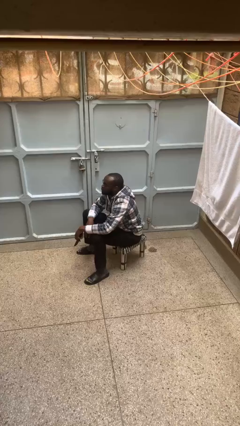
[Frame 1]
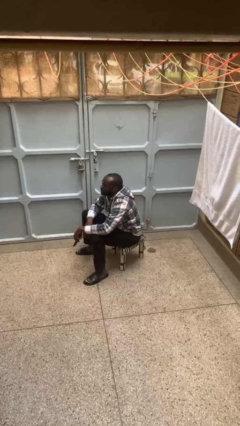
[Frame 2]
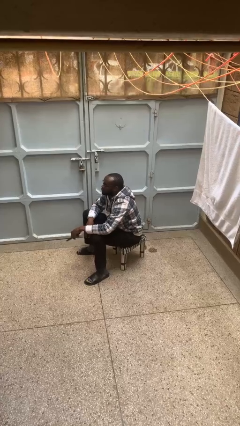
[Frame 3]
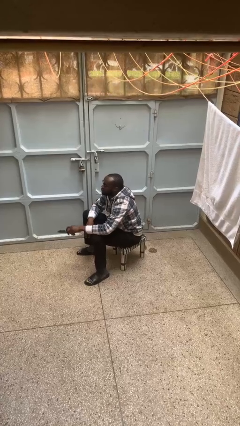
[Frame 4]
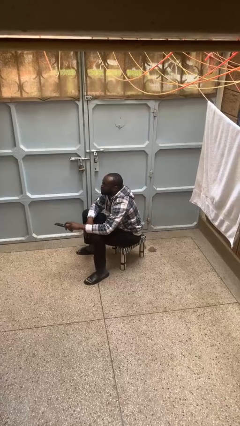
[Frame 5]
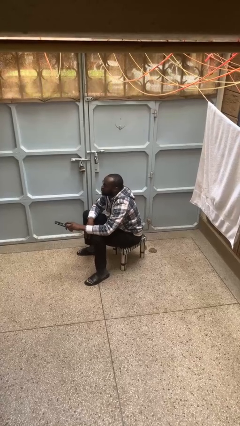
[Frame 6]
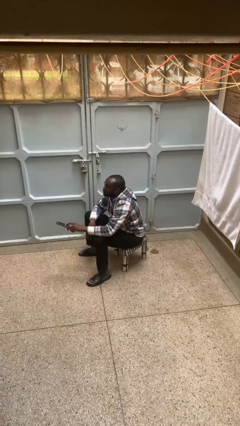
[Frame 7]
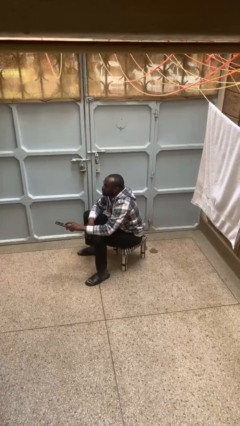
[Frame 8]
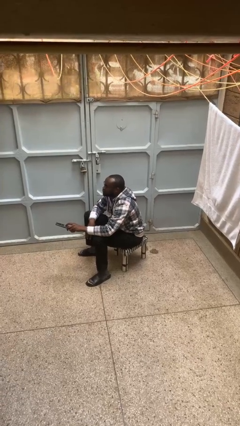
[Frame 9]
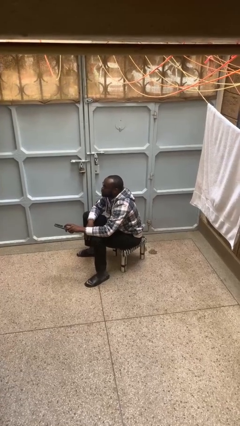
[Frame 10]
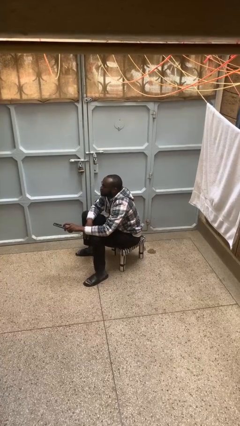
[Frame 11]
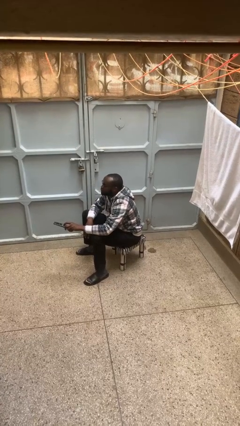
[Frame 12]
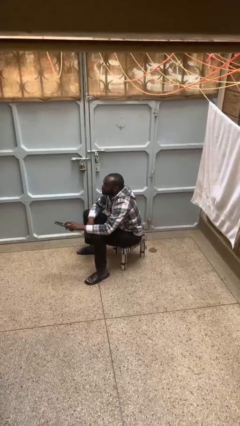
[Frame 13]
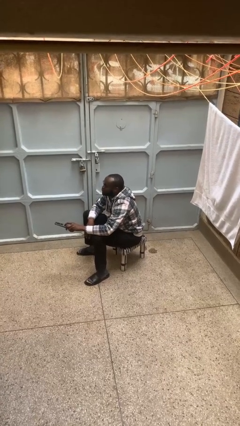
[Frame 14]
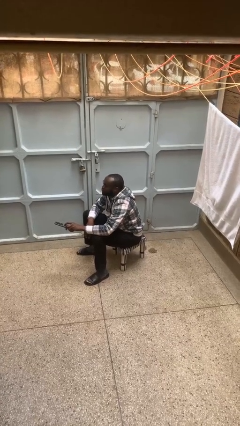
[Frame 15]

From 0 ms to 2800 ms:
person uses television remote

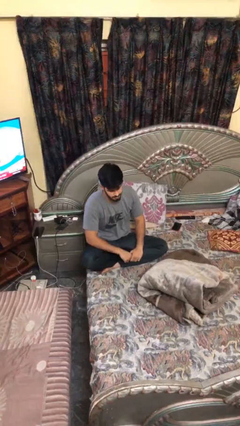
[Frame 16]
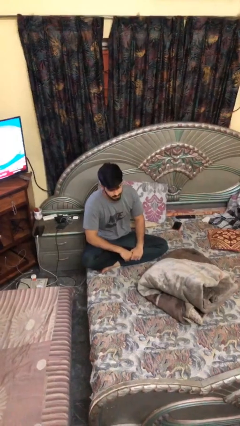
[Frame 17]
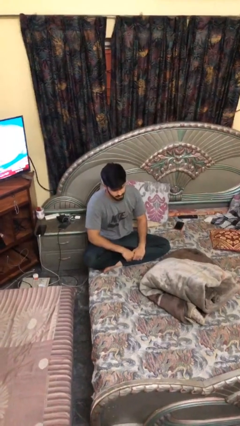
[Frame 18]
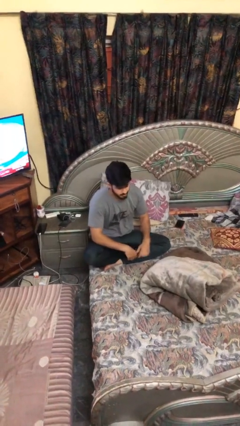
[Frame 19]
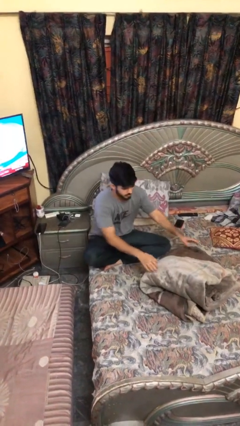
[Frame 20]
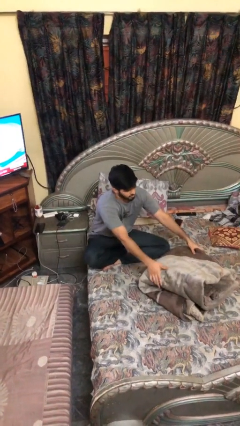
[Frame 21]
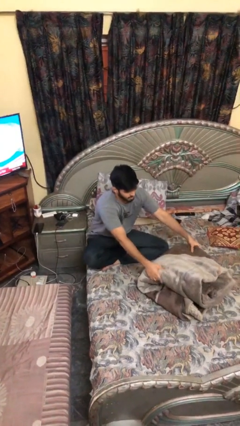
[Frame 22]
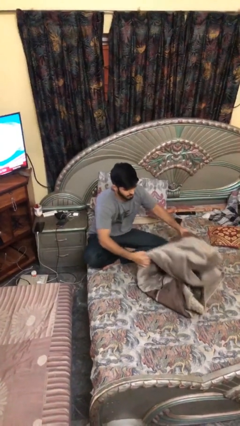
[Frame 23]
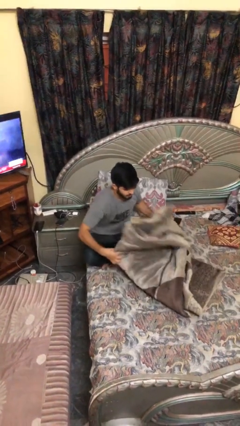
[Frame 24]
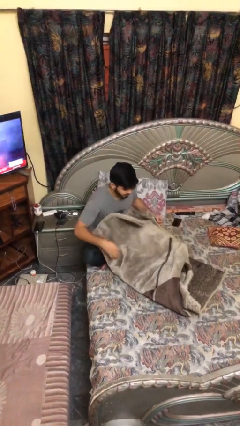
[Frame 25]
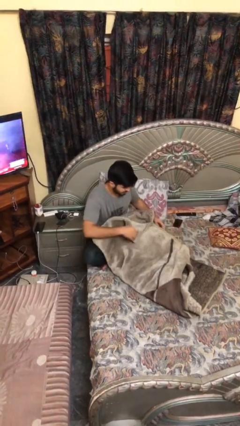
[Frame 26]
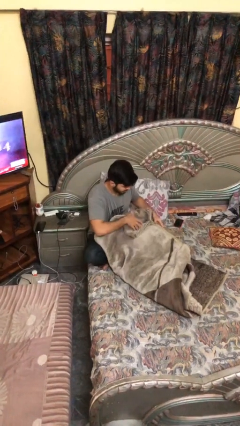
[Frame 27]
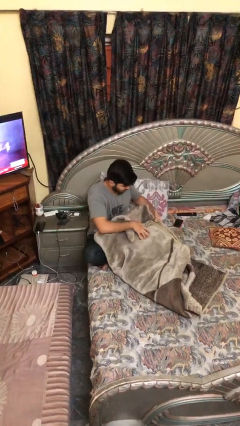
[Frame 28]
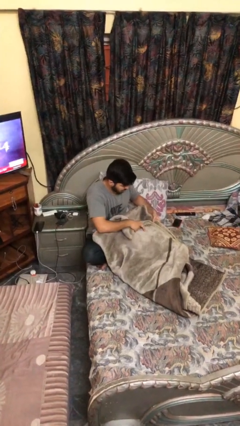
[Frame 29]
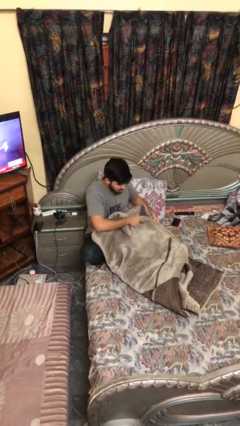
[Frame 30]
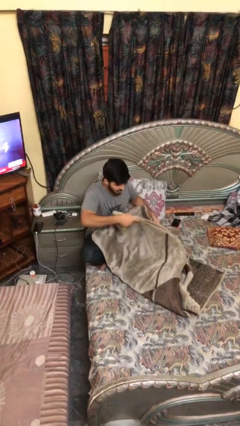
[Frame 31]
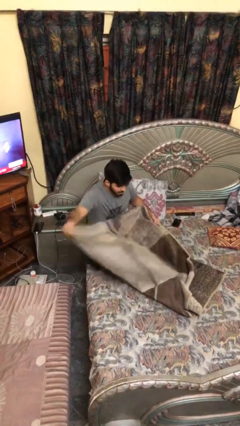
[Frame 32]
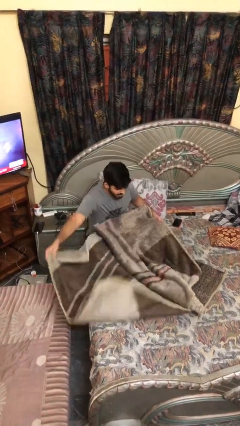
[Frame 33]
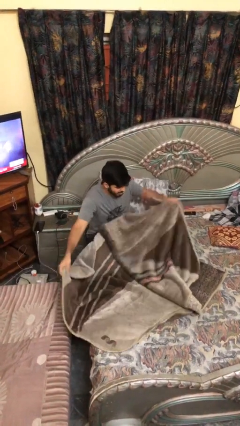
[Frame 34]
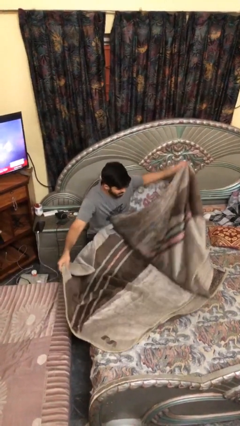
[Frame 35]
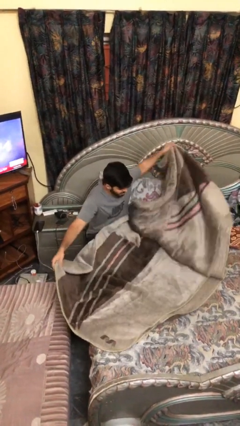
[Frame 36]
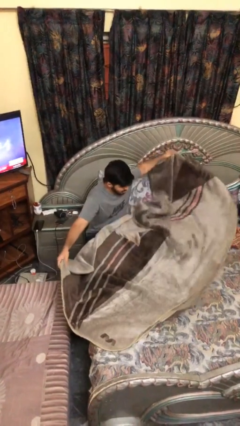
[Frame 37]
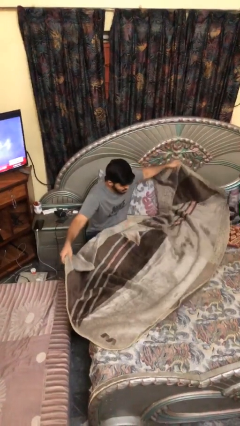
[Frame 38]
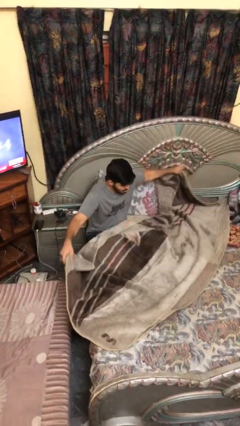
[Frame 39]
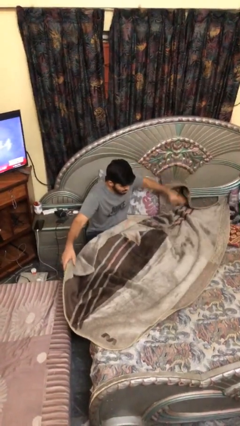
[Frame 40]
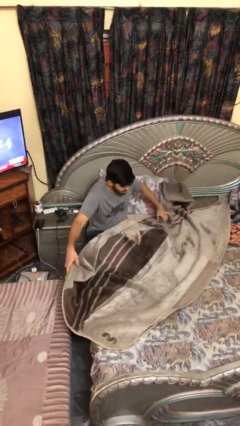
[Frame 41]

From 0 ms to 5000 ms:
person unfolds blanket

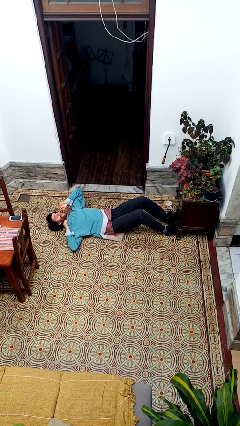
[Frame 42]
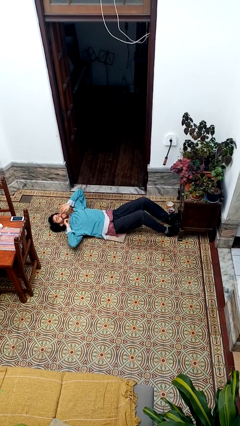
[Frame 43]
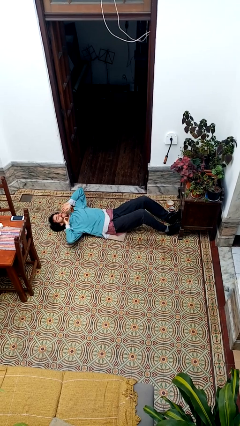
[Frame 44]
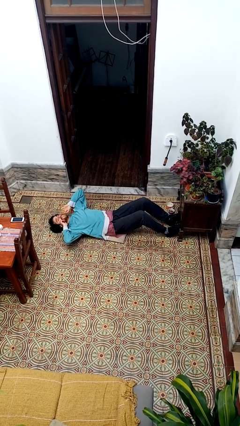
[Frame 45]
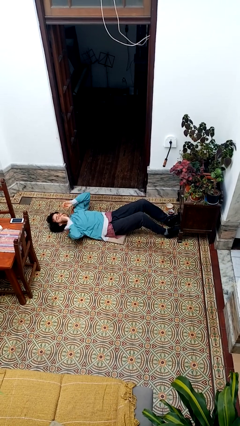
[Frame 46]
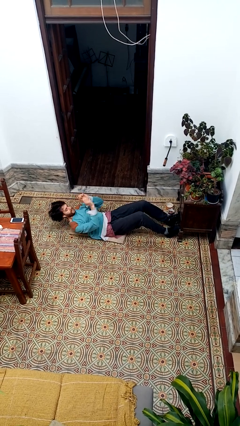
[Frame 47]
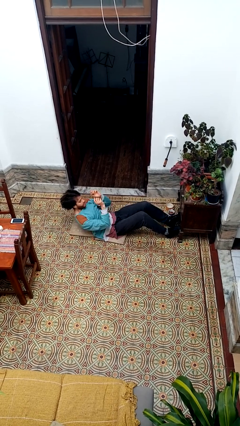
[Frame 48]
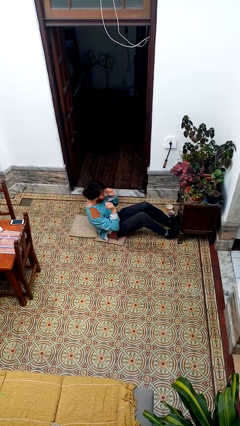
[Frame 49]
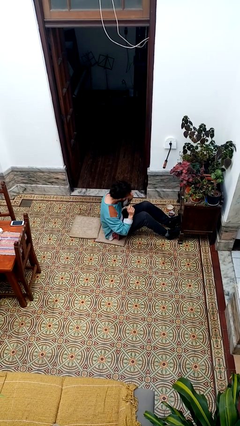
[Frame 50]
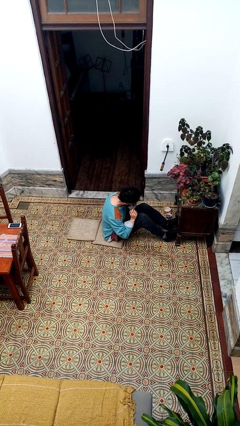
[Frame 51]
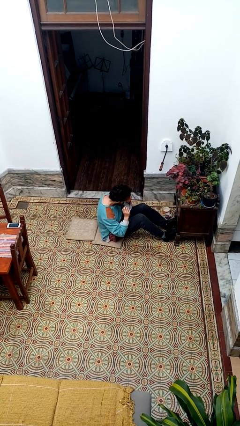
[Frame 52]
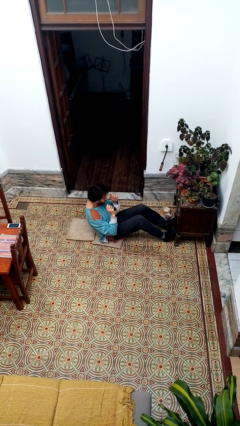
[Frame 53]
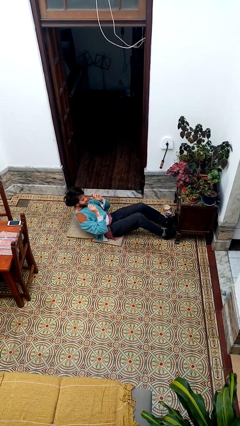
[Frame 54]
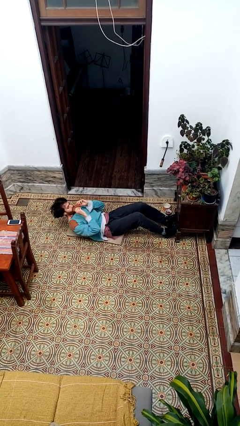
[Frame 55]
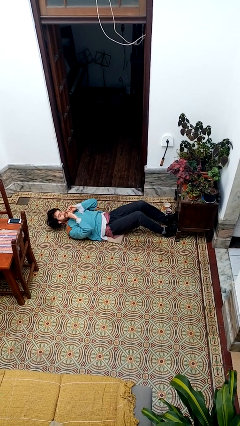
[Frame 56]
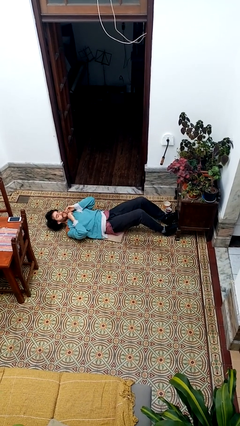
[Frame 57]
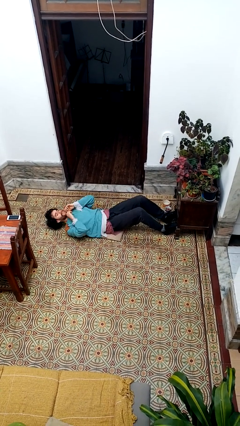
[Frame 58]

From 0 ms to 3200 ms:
person exercises with situp

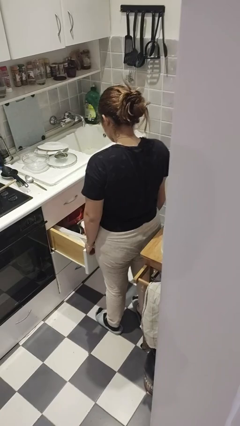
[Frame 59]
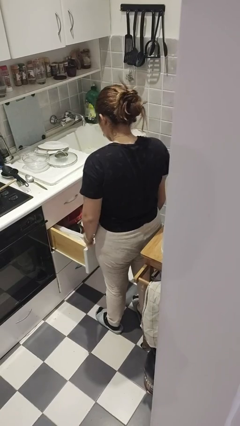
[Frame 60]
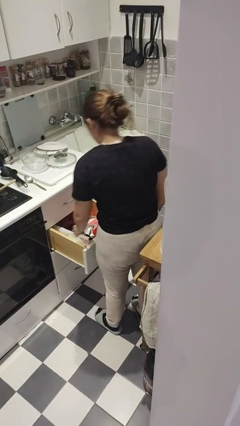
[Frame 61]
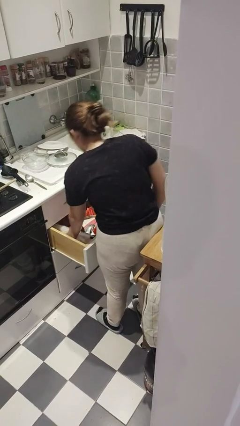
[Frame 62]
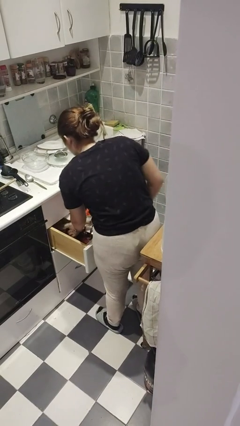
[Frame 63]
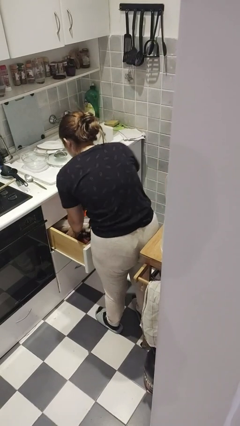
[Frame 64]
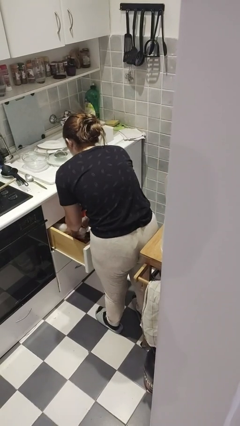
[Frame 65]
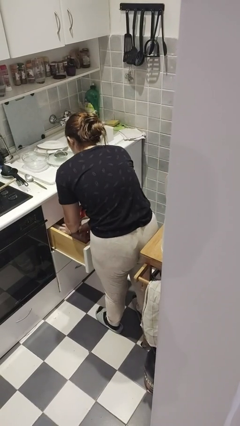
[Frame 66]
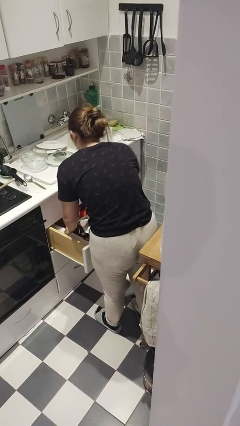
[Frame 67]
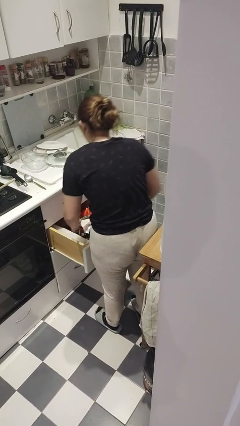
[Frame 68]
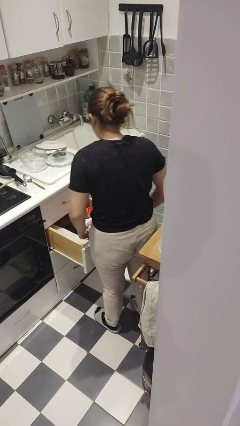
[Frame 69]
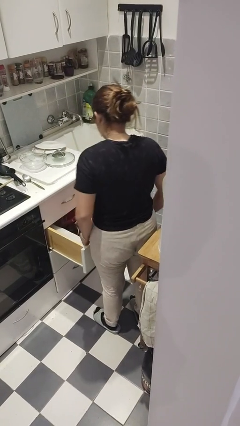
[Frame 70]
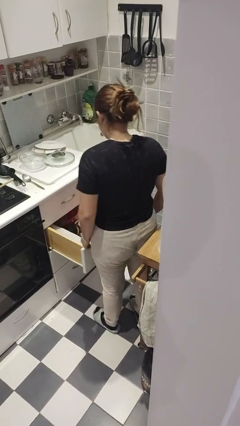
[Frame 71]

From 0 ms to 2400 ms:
person searches in kitchen drawer

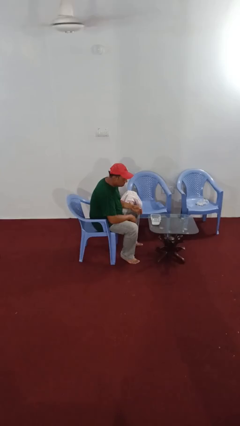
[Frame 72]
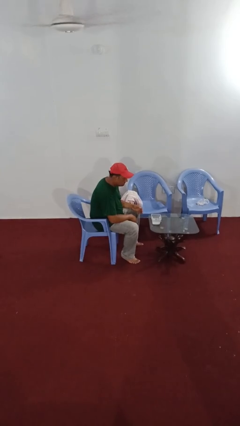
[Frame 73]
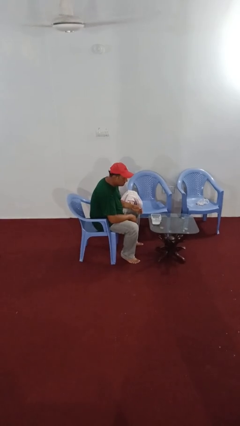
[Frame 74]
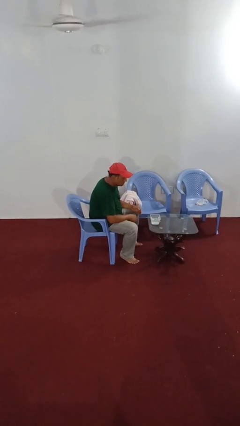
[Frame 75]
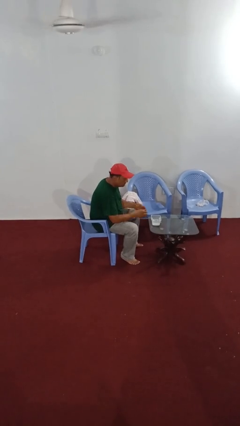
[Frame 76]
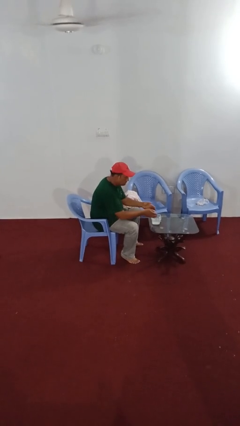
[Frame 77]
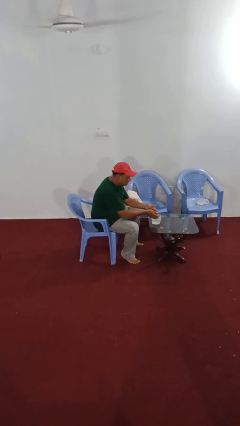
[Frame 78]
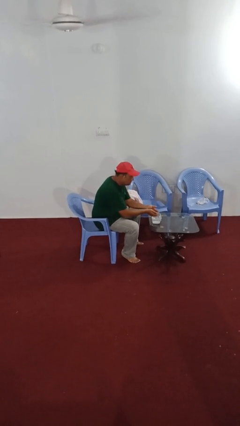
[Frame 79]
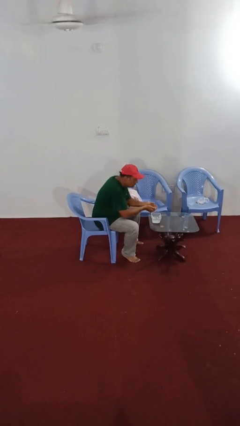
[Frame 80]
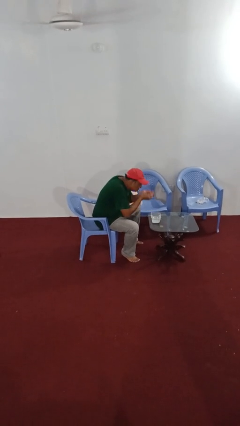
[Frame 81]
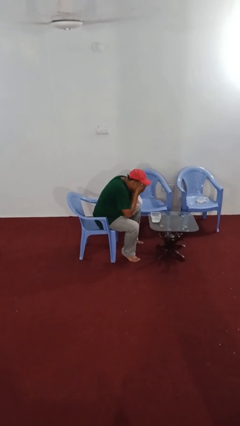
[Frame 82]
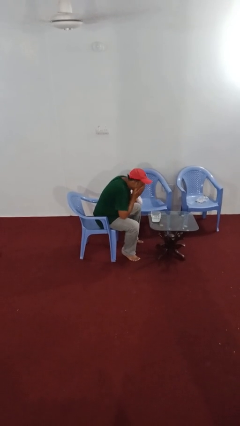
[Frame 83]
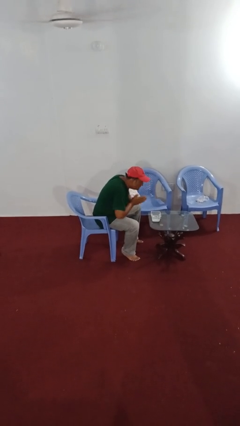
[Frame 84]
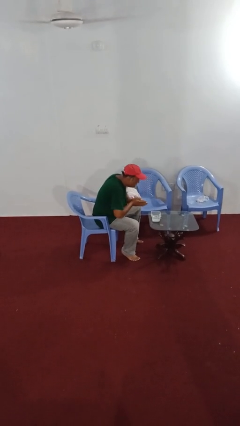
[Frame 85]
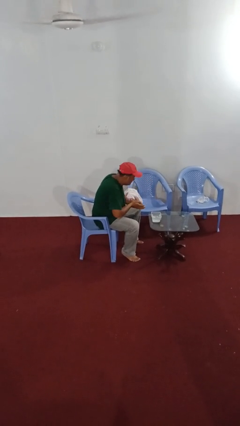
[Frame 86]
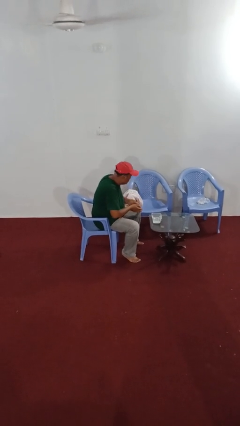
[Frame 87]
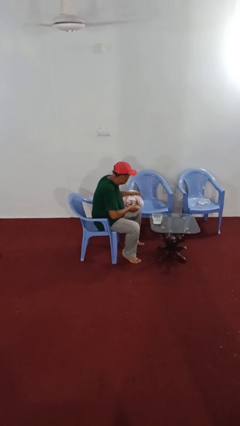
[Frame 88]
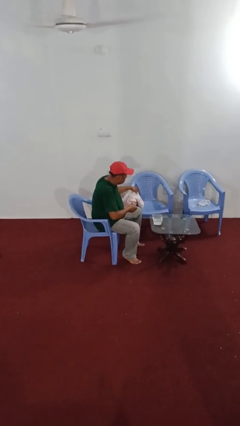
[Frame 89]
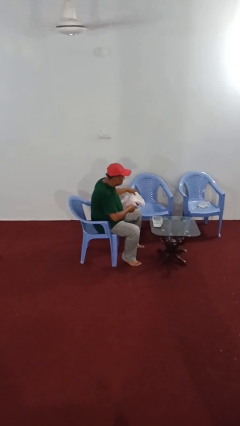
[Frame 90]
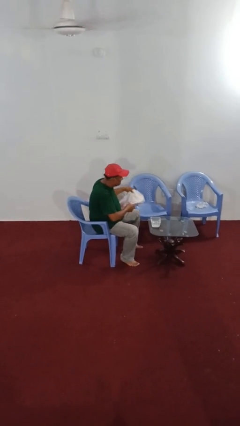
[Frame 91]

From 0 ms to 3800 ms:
person washes face
